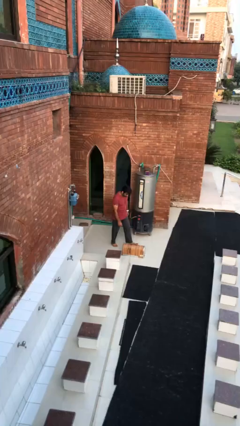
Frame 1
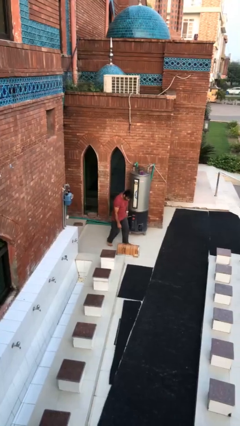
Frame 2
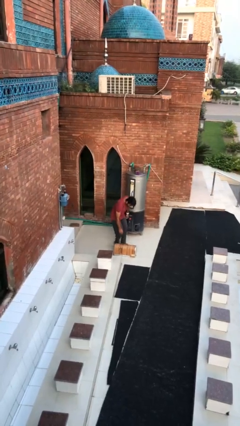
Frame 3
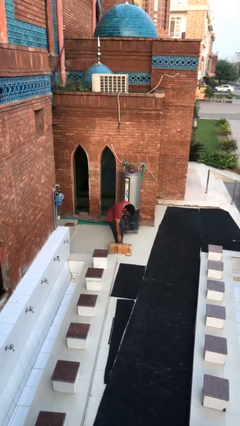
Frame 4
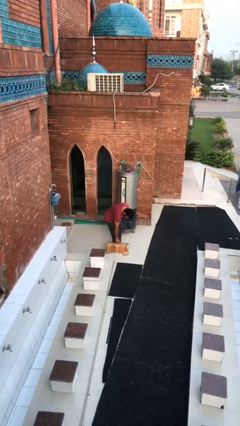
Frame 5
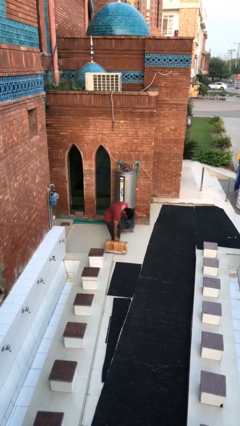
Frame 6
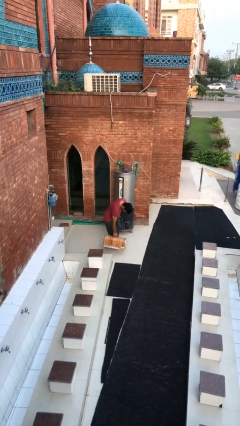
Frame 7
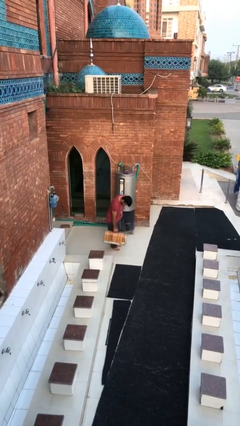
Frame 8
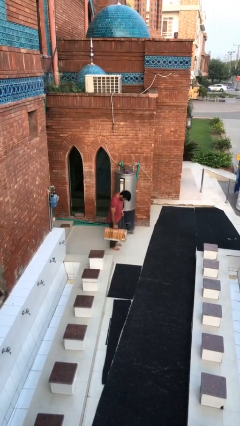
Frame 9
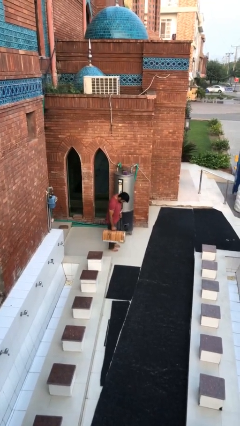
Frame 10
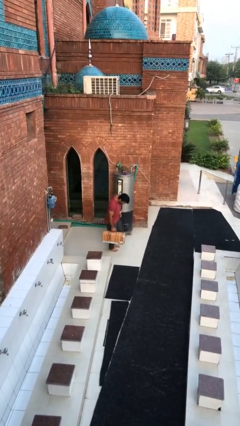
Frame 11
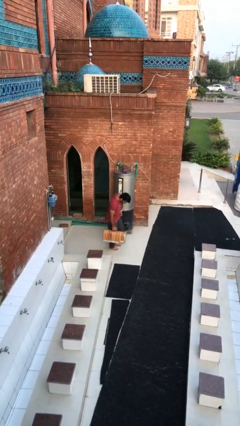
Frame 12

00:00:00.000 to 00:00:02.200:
person picks up object from floor

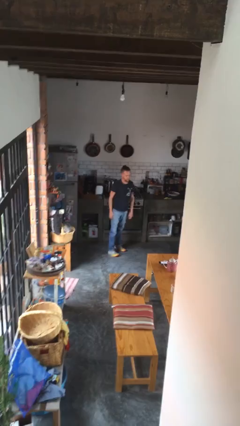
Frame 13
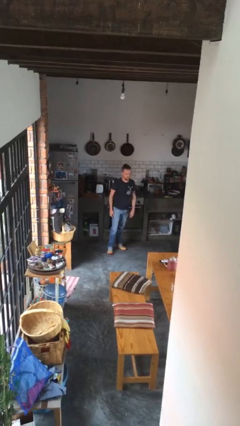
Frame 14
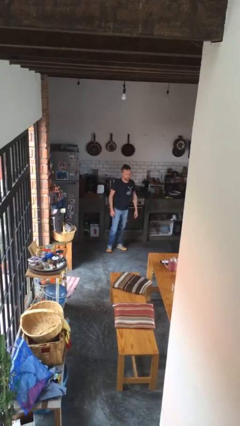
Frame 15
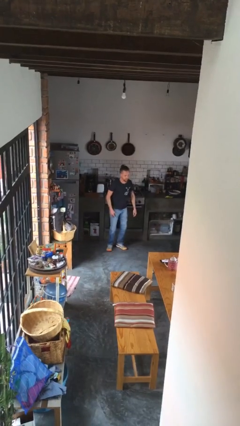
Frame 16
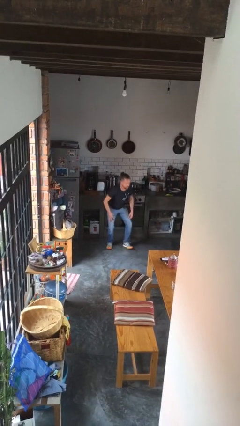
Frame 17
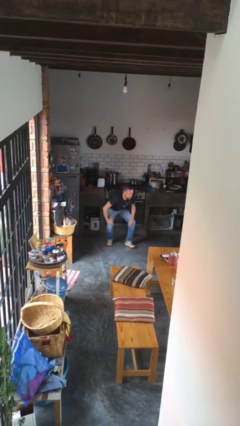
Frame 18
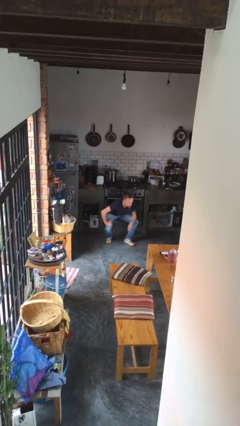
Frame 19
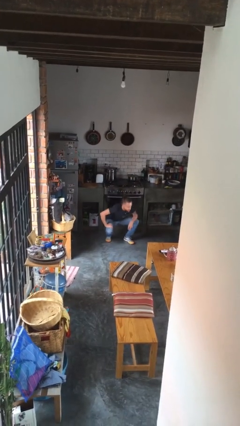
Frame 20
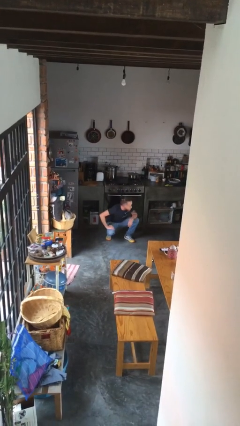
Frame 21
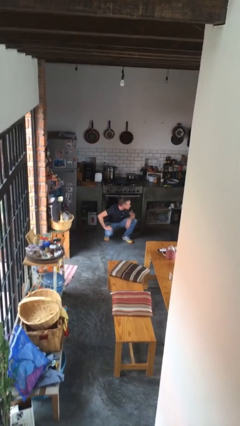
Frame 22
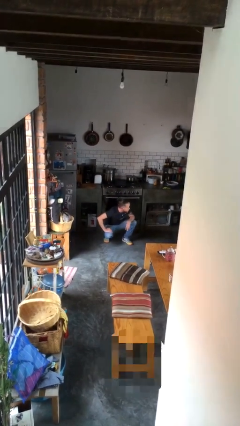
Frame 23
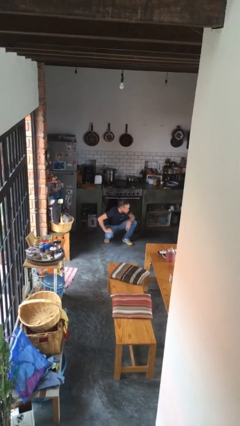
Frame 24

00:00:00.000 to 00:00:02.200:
person squats

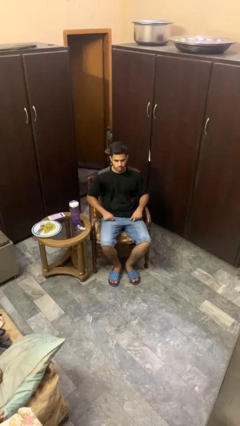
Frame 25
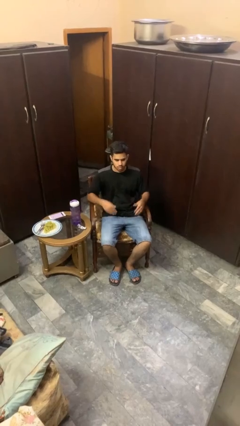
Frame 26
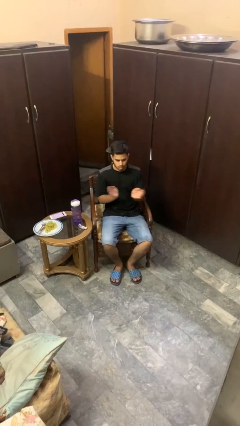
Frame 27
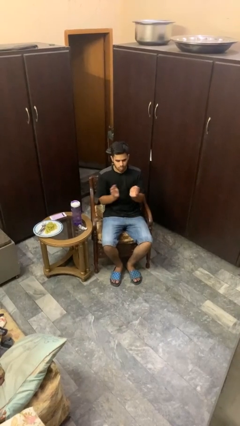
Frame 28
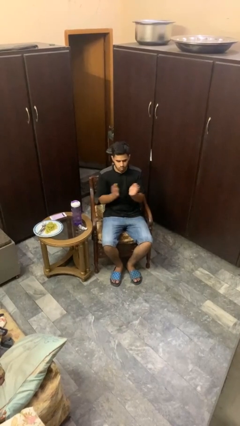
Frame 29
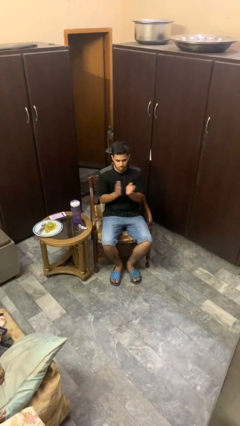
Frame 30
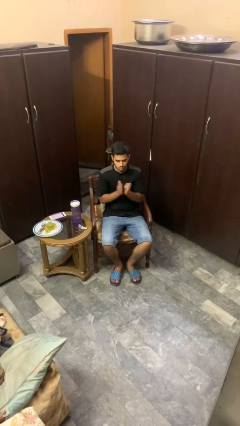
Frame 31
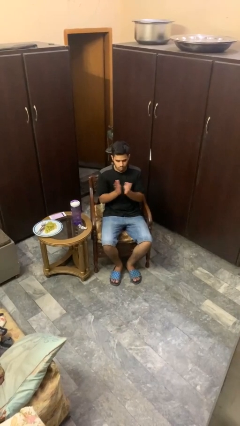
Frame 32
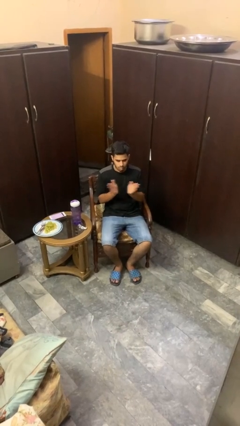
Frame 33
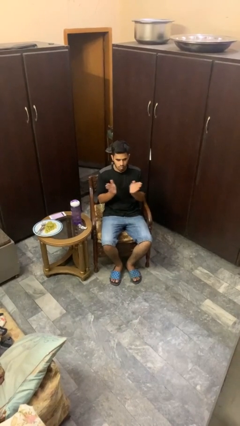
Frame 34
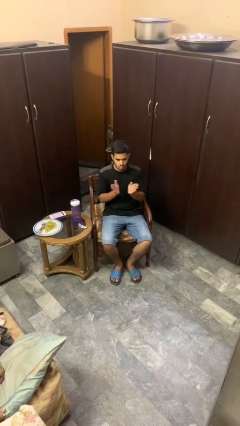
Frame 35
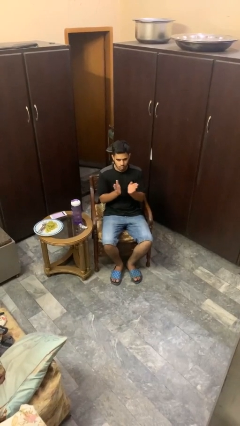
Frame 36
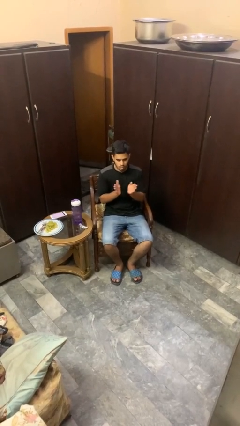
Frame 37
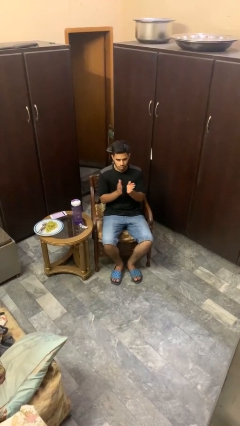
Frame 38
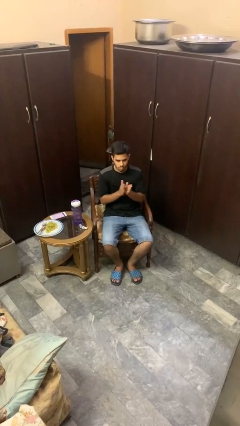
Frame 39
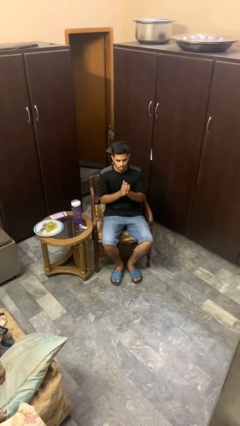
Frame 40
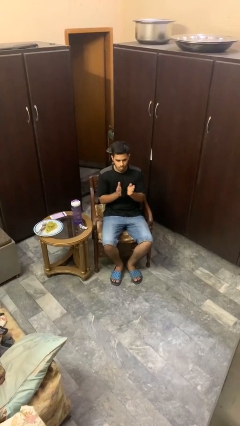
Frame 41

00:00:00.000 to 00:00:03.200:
person claps hands

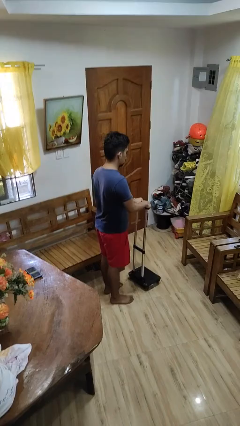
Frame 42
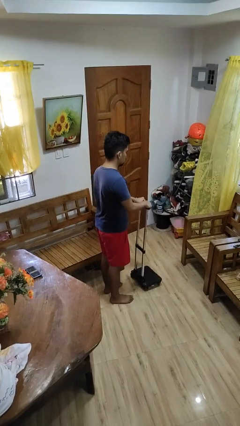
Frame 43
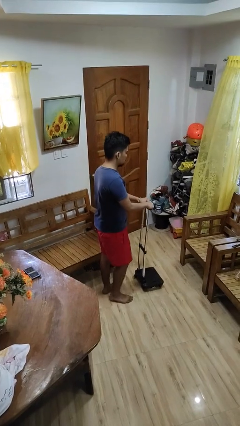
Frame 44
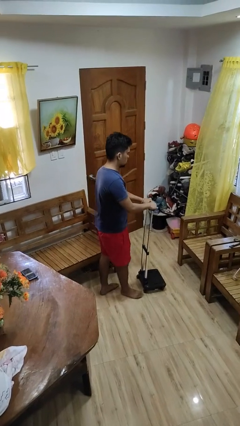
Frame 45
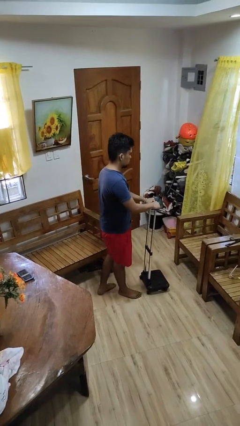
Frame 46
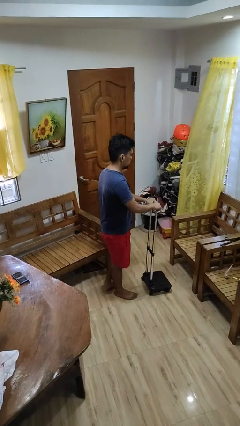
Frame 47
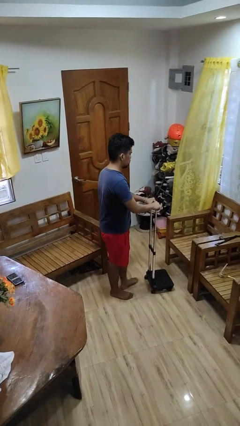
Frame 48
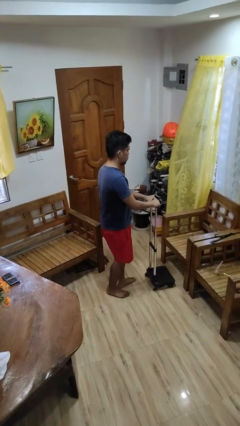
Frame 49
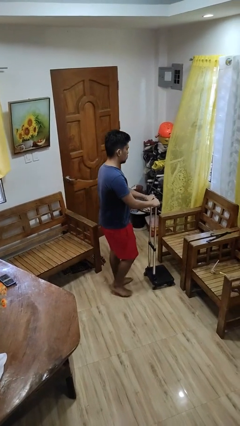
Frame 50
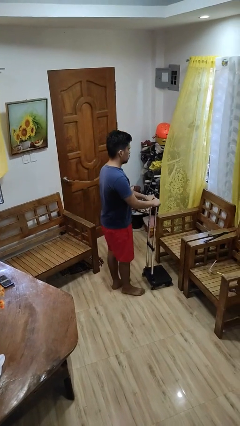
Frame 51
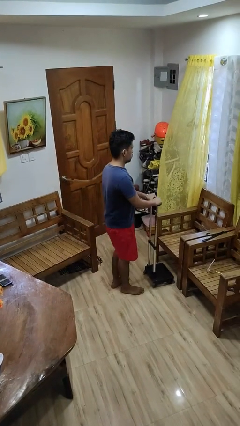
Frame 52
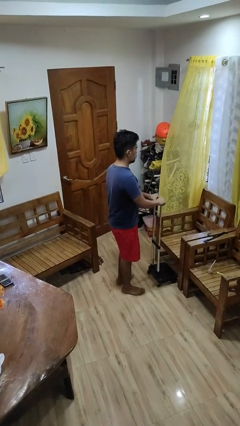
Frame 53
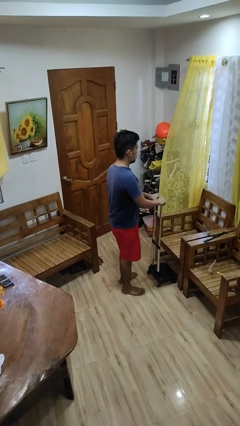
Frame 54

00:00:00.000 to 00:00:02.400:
person pushes wheeled cart

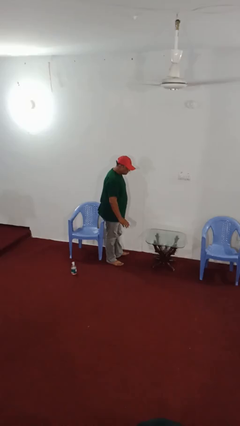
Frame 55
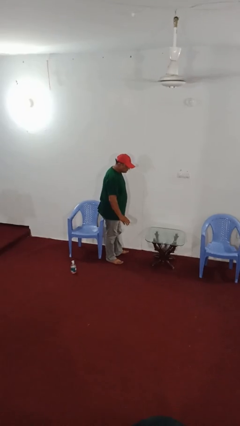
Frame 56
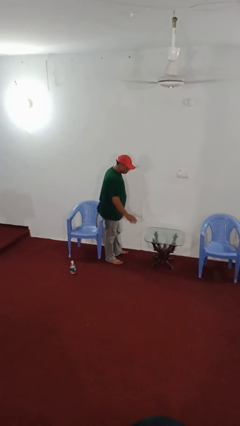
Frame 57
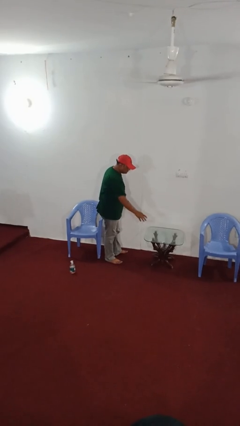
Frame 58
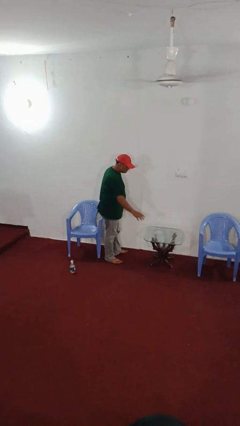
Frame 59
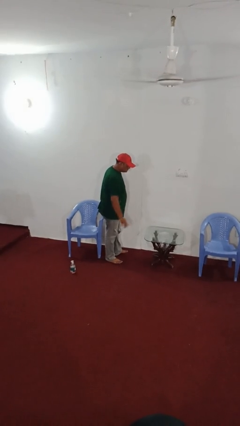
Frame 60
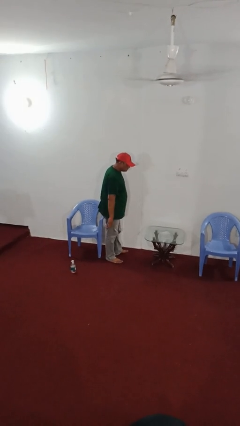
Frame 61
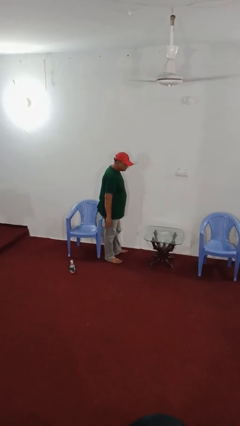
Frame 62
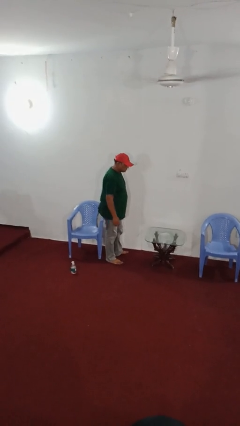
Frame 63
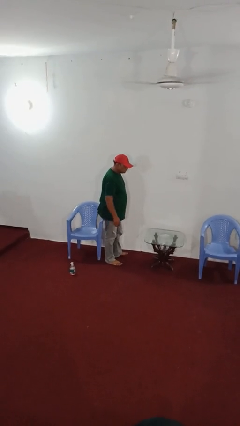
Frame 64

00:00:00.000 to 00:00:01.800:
person throws object on table

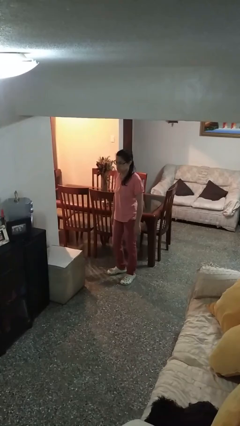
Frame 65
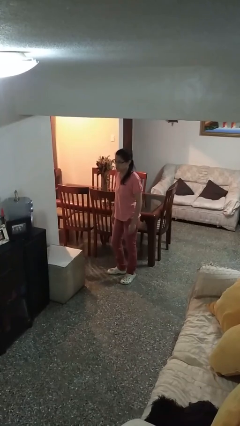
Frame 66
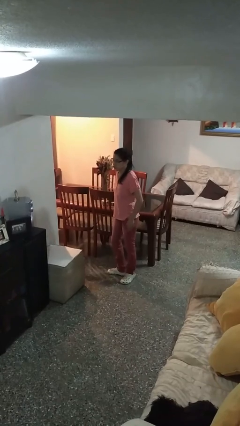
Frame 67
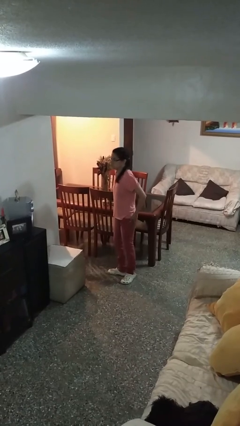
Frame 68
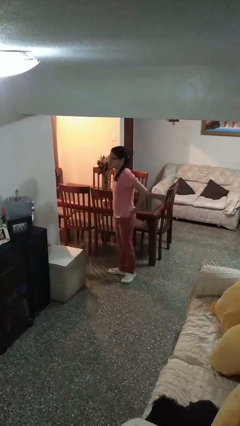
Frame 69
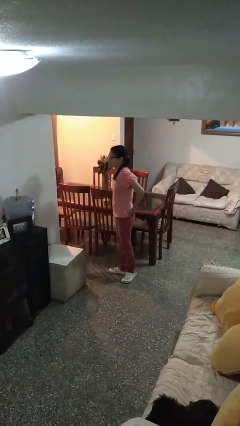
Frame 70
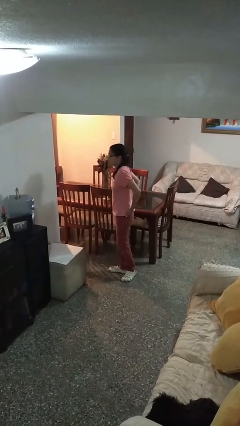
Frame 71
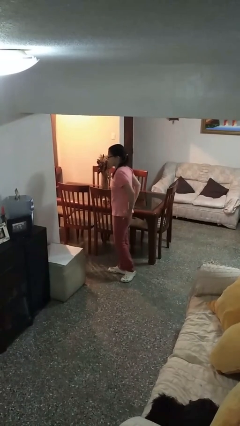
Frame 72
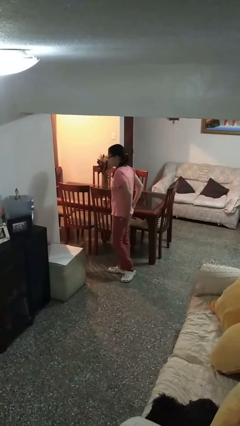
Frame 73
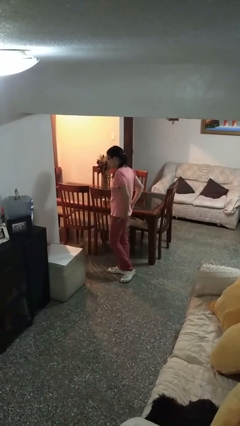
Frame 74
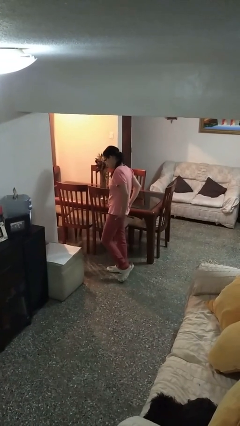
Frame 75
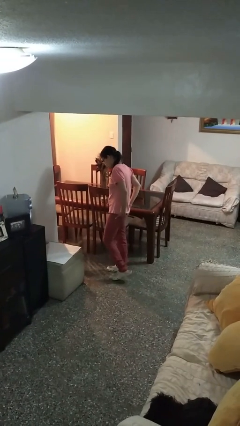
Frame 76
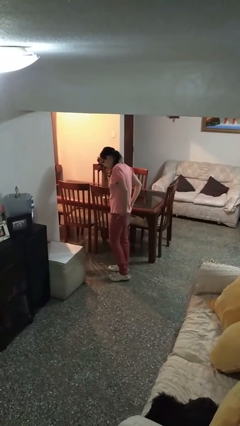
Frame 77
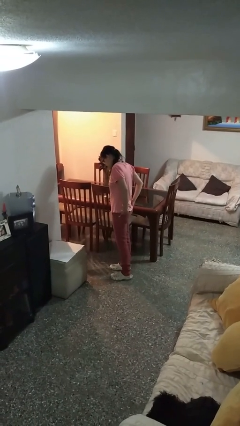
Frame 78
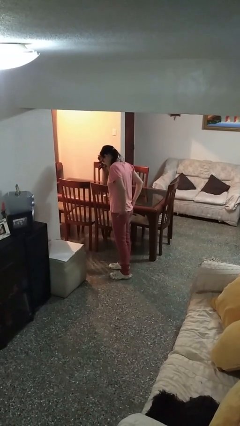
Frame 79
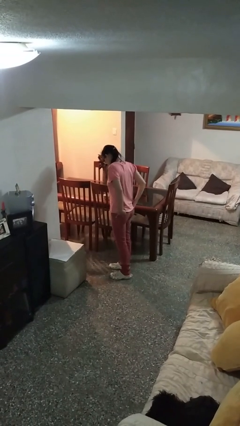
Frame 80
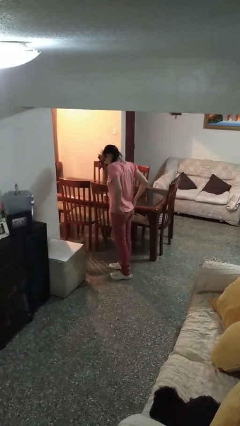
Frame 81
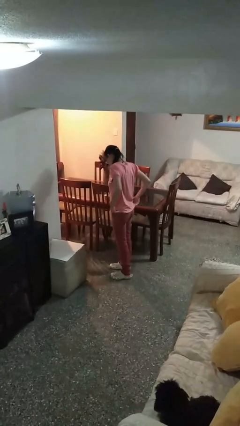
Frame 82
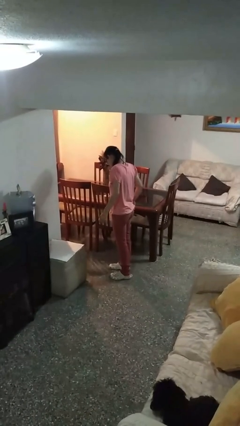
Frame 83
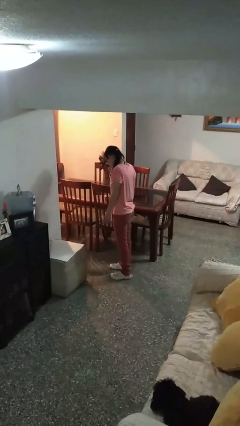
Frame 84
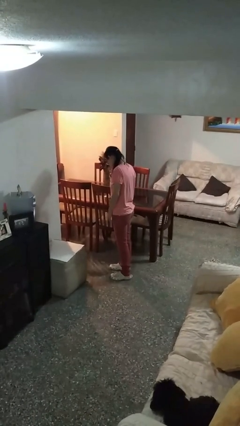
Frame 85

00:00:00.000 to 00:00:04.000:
person puts hands in back pockets

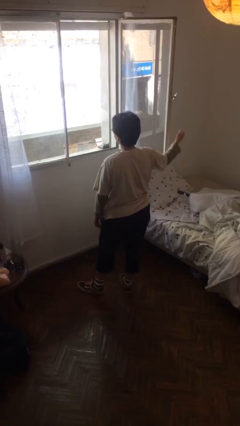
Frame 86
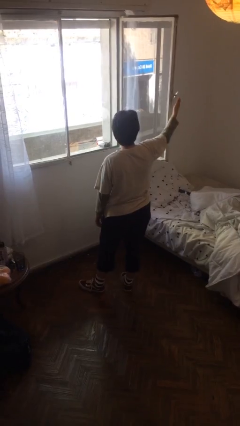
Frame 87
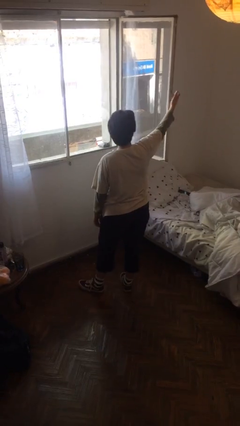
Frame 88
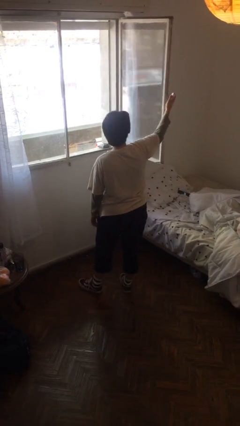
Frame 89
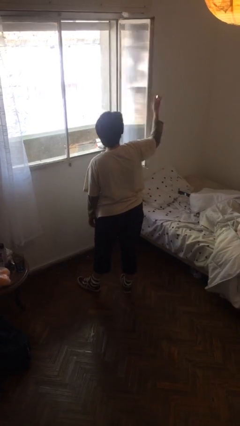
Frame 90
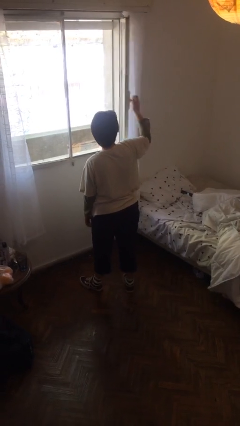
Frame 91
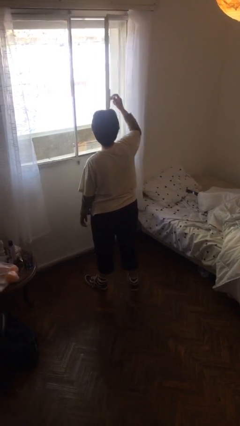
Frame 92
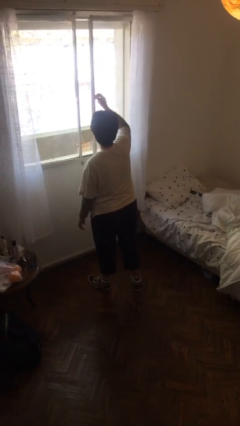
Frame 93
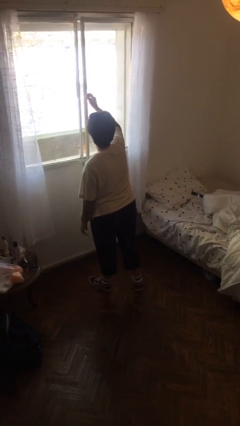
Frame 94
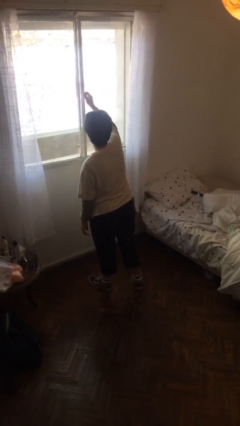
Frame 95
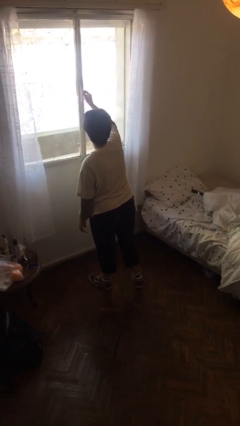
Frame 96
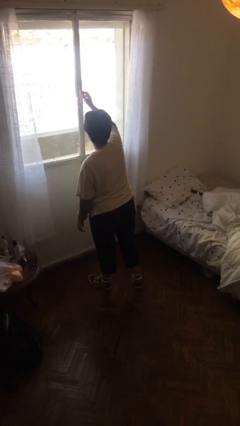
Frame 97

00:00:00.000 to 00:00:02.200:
person closes home window
